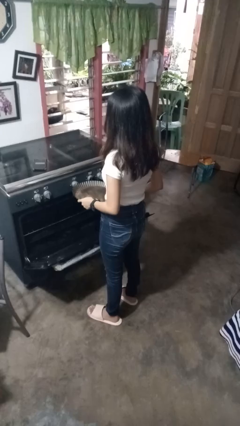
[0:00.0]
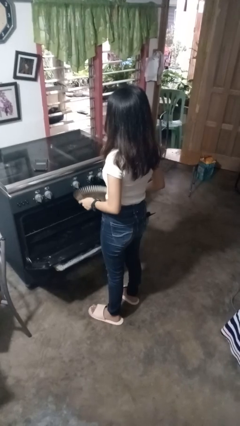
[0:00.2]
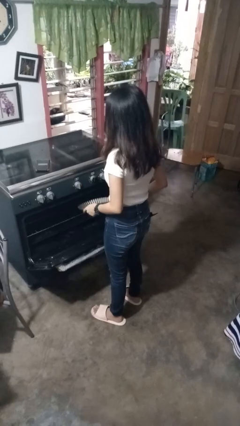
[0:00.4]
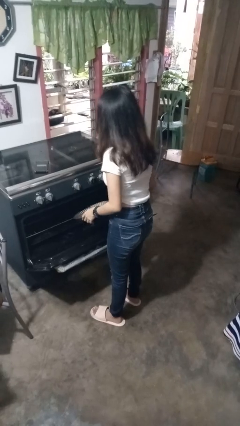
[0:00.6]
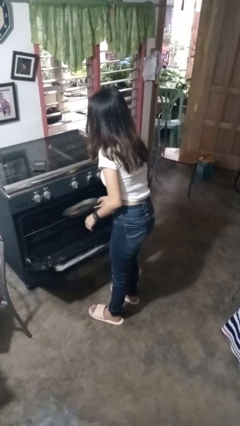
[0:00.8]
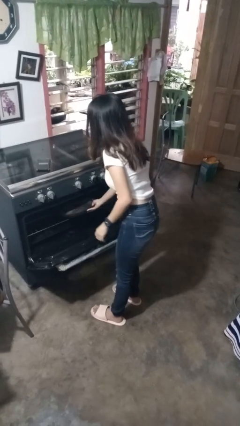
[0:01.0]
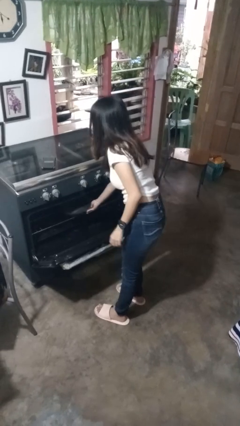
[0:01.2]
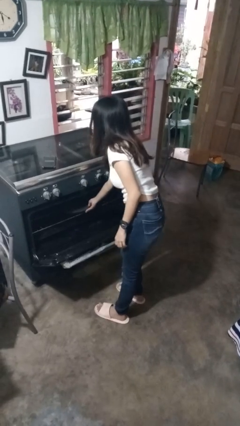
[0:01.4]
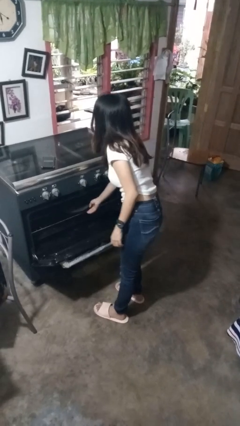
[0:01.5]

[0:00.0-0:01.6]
person puts object into oven

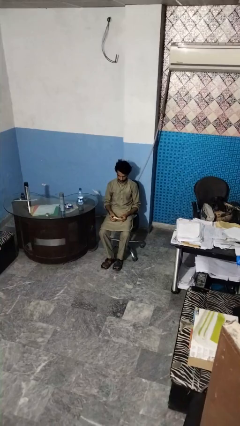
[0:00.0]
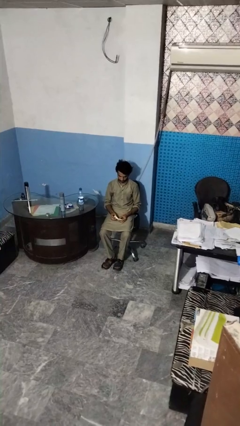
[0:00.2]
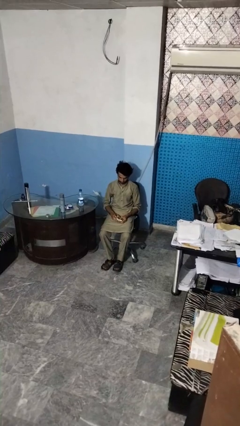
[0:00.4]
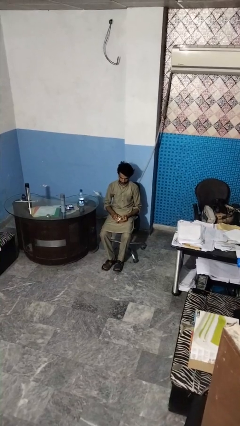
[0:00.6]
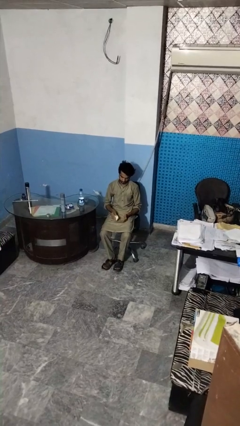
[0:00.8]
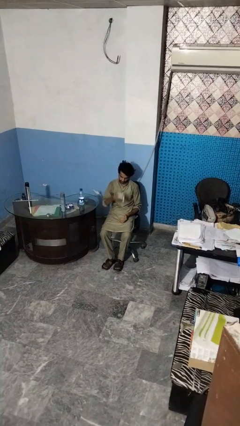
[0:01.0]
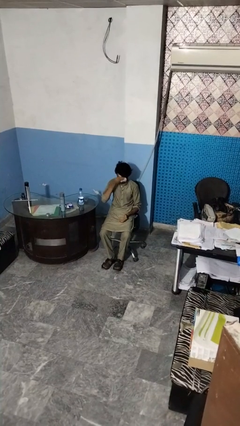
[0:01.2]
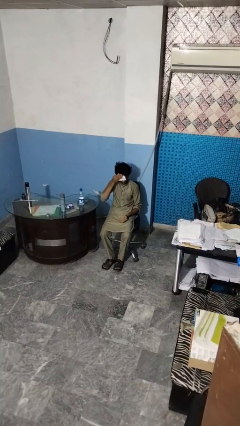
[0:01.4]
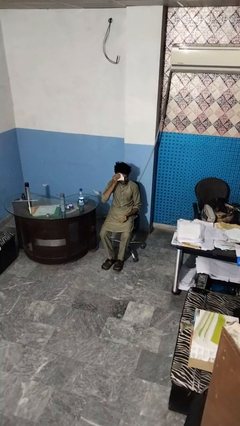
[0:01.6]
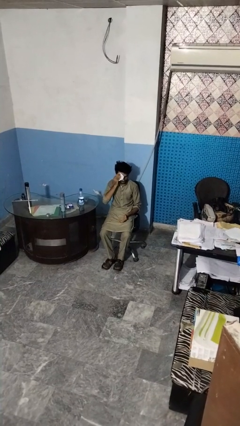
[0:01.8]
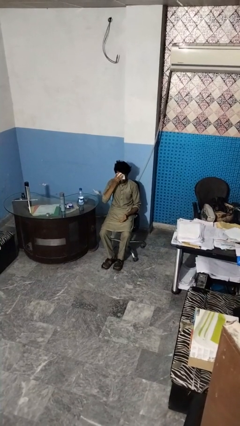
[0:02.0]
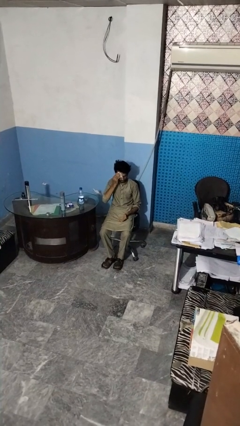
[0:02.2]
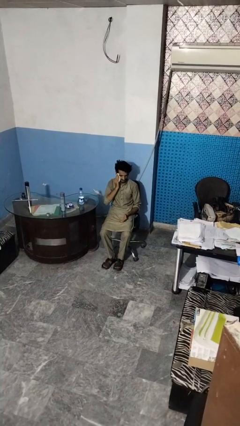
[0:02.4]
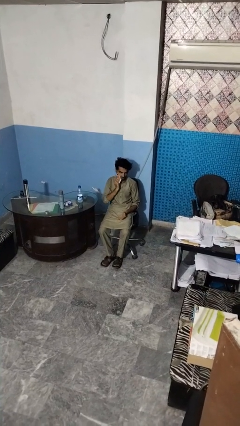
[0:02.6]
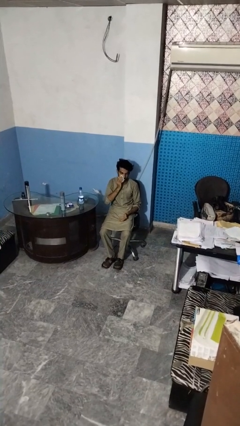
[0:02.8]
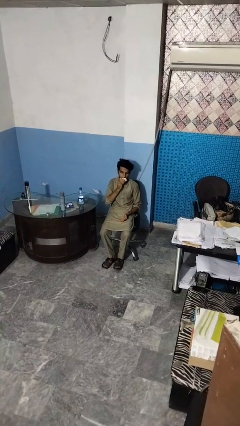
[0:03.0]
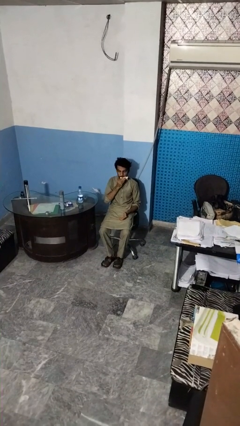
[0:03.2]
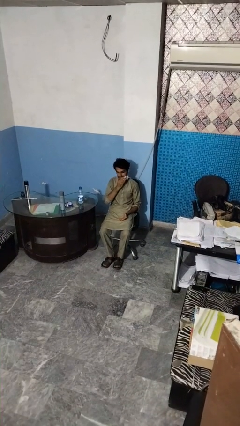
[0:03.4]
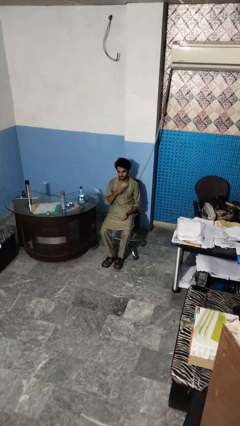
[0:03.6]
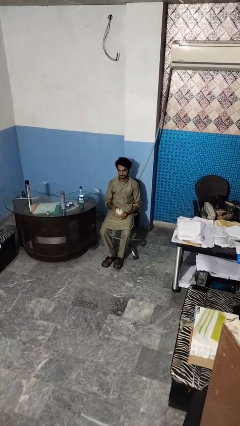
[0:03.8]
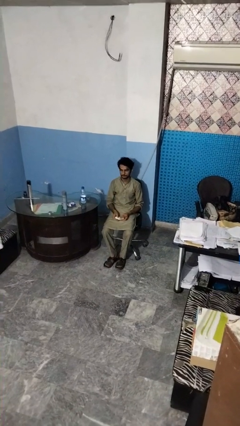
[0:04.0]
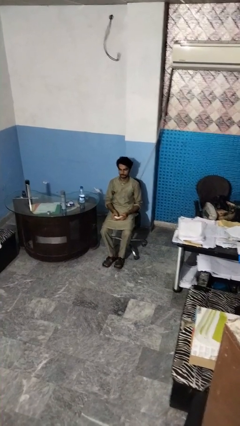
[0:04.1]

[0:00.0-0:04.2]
person wipes mouth with napkin

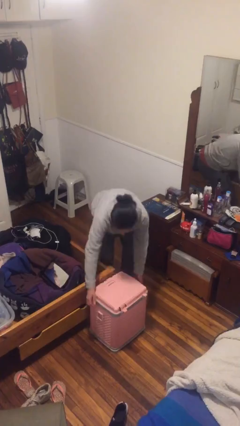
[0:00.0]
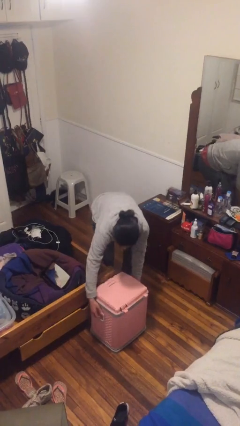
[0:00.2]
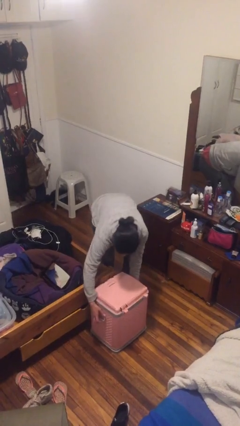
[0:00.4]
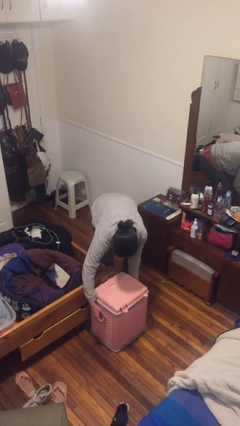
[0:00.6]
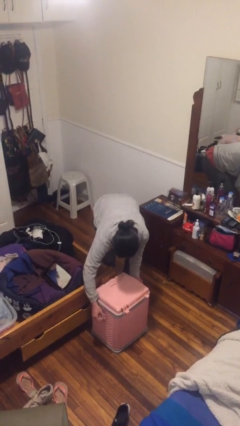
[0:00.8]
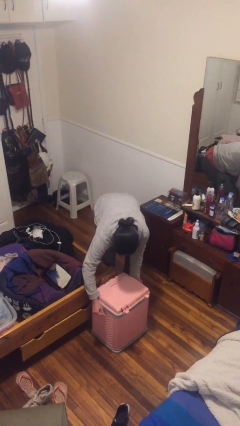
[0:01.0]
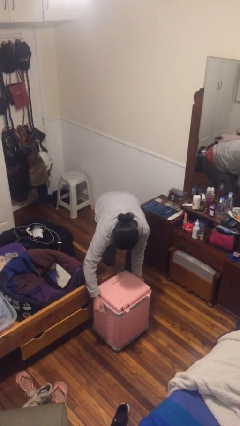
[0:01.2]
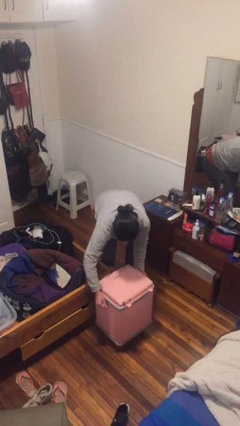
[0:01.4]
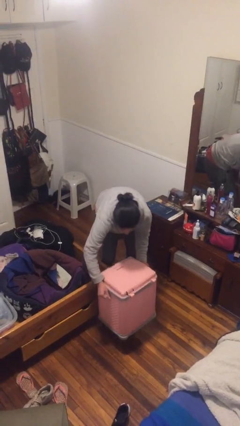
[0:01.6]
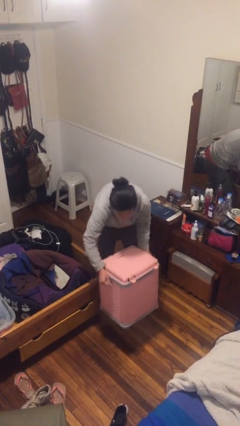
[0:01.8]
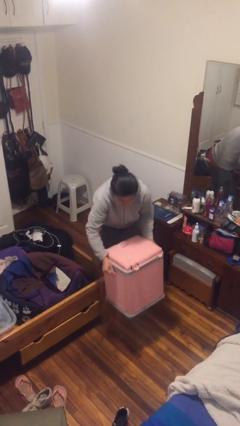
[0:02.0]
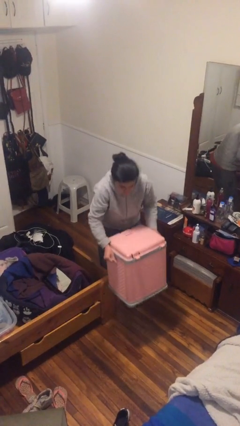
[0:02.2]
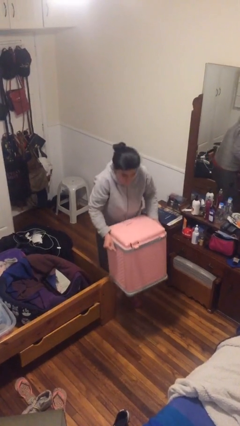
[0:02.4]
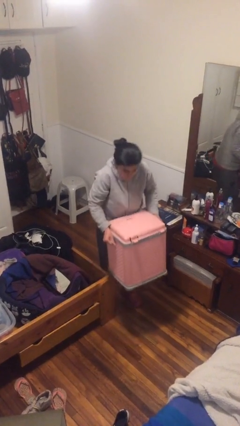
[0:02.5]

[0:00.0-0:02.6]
person picks up object from floor

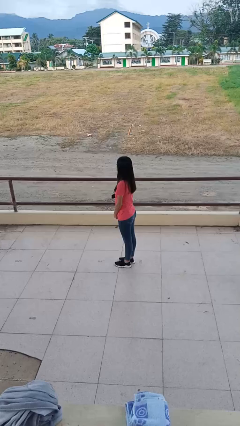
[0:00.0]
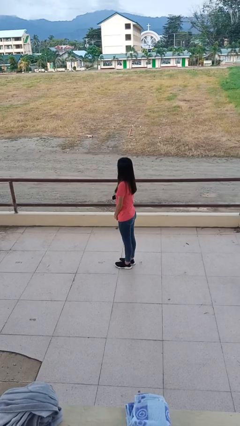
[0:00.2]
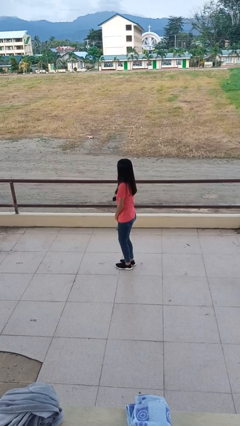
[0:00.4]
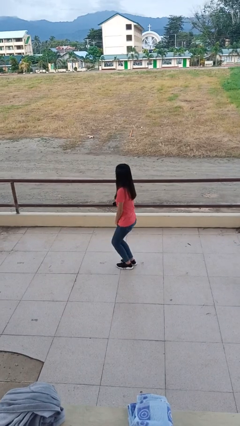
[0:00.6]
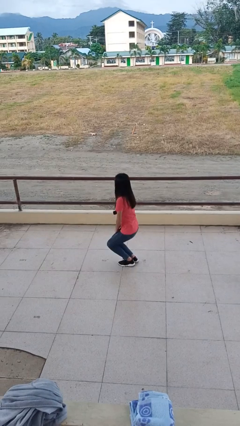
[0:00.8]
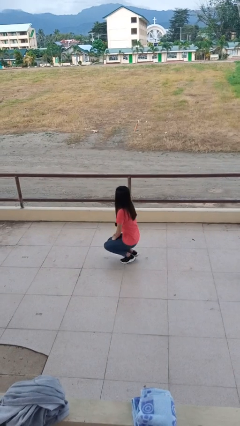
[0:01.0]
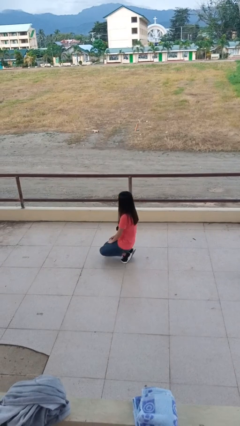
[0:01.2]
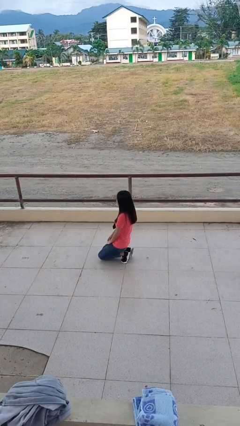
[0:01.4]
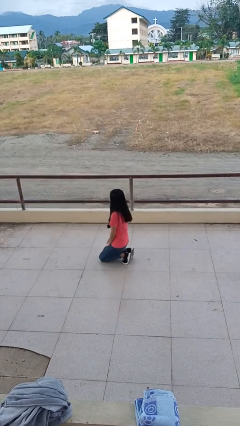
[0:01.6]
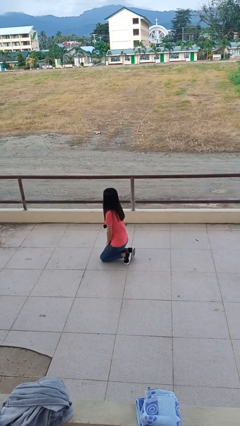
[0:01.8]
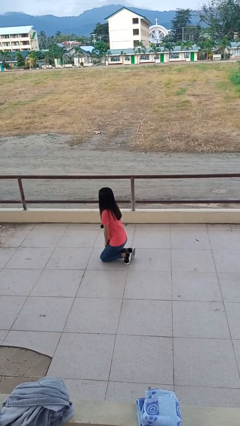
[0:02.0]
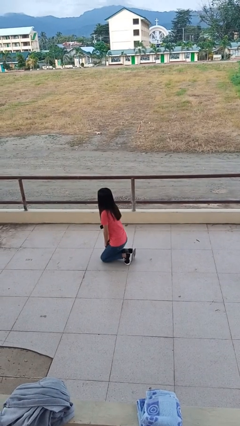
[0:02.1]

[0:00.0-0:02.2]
person kneels

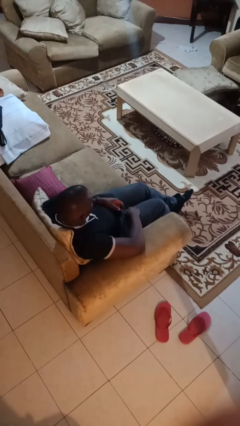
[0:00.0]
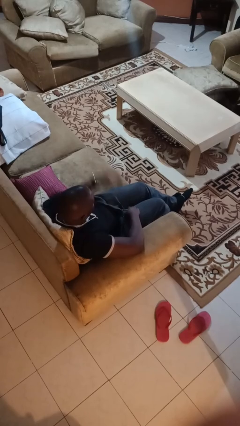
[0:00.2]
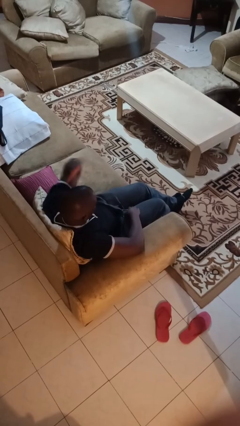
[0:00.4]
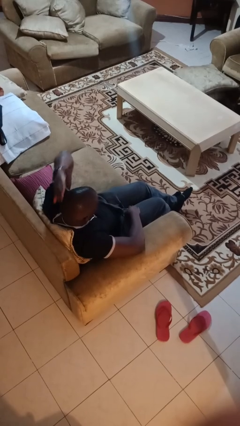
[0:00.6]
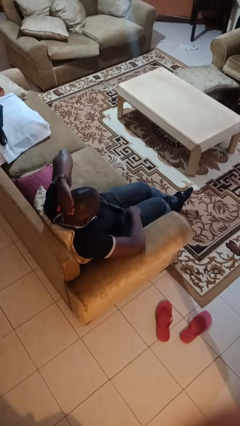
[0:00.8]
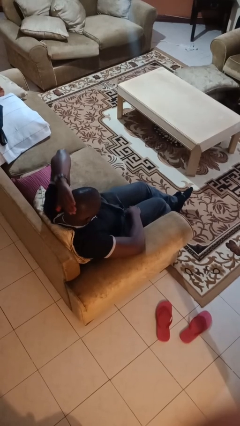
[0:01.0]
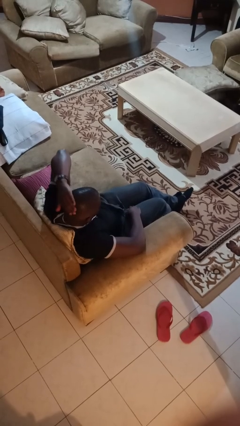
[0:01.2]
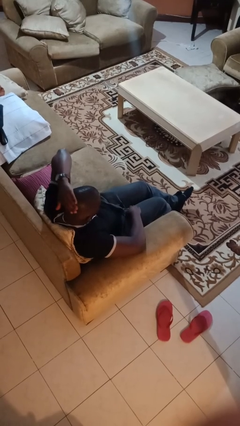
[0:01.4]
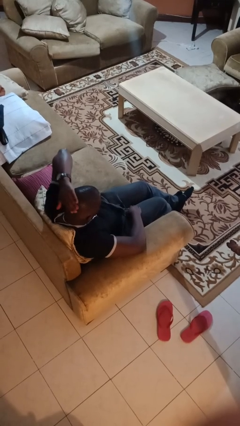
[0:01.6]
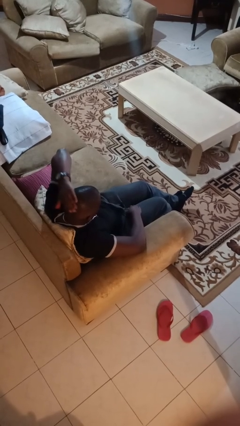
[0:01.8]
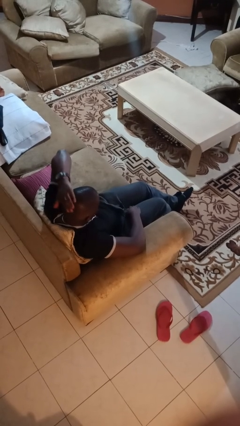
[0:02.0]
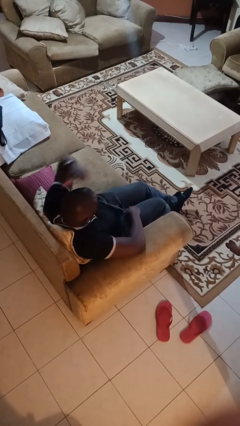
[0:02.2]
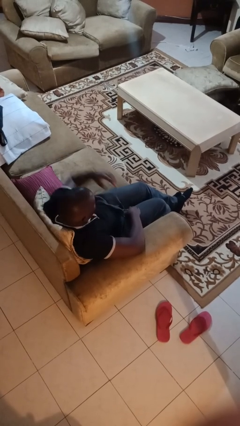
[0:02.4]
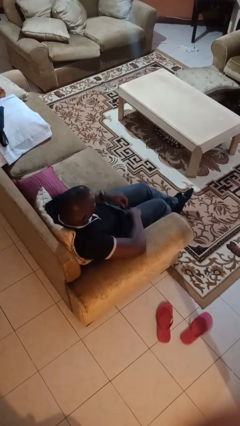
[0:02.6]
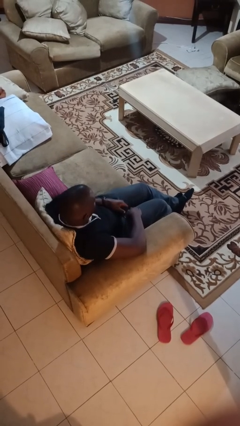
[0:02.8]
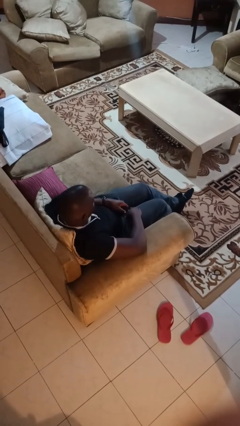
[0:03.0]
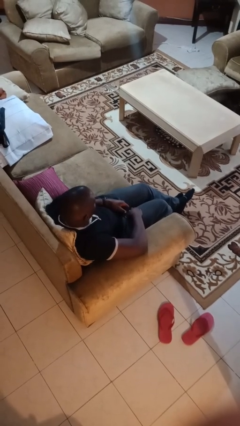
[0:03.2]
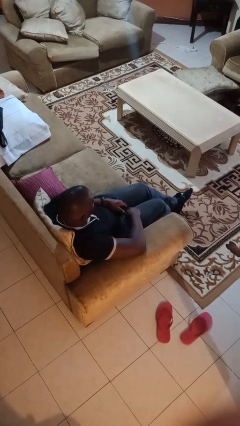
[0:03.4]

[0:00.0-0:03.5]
person pats head

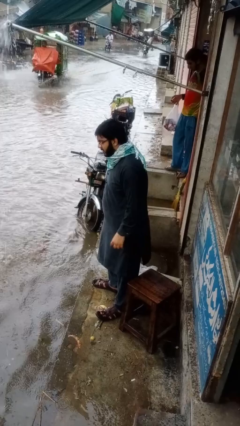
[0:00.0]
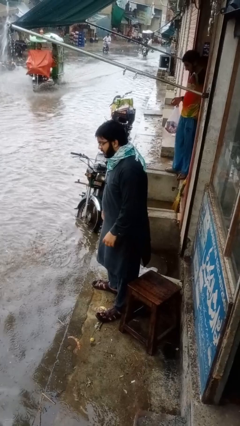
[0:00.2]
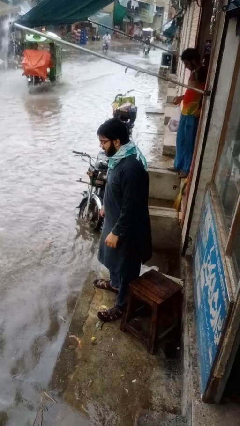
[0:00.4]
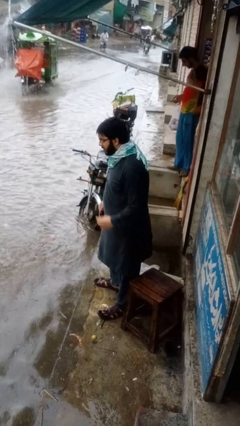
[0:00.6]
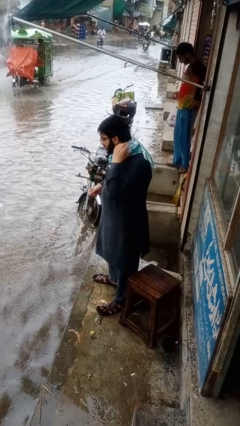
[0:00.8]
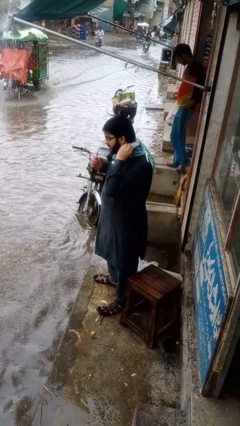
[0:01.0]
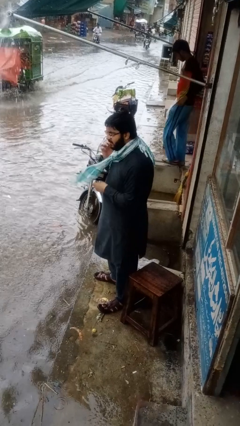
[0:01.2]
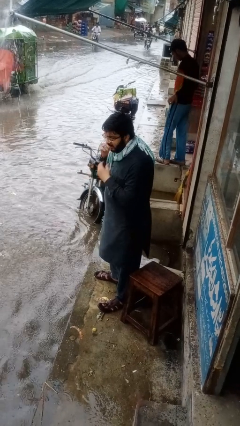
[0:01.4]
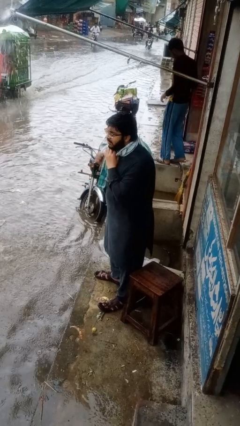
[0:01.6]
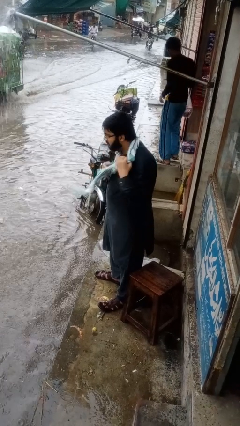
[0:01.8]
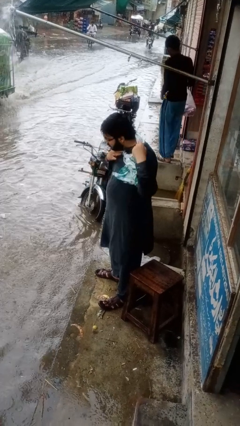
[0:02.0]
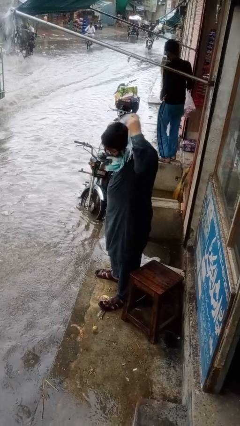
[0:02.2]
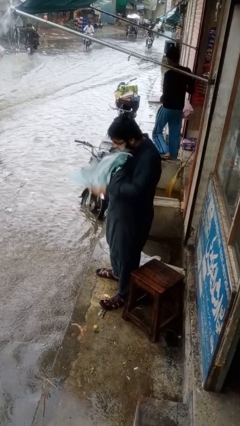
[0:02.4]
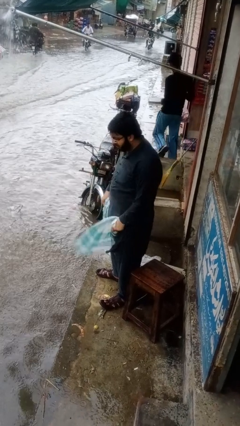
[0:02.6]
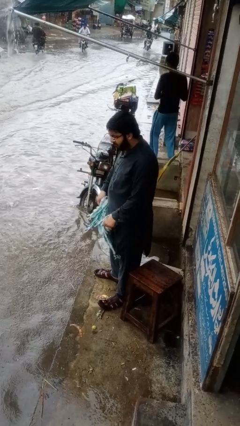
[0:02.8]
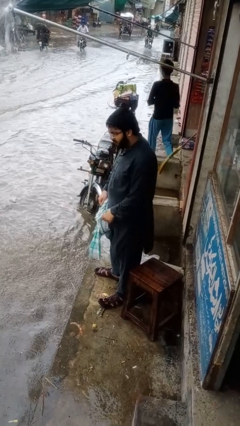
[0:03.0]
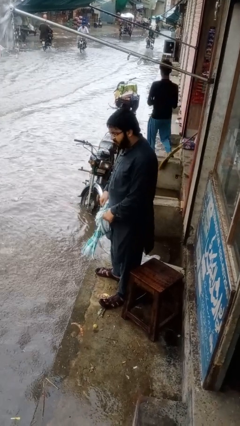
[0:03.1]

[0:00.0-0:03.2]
person takes off scarf

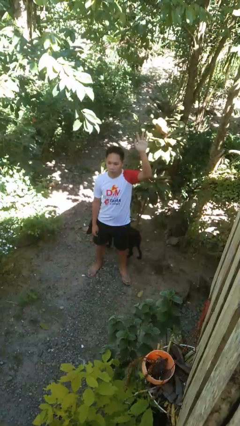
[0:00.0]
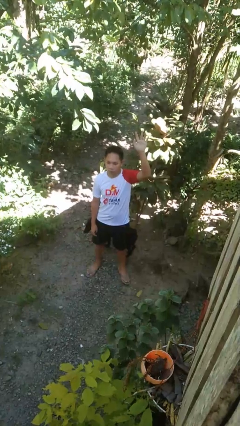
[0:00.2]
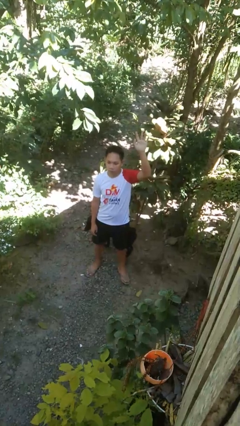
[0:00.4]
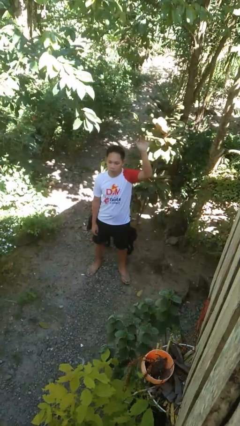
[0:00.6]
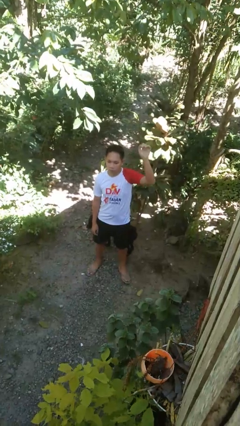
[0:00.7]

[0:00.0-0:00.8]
person gestures lower hand
